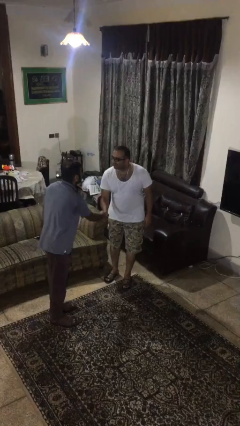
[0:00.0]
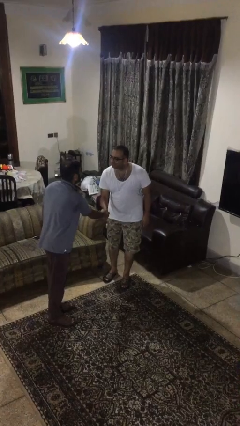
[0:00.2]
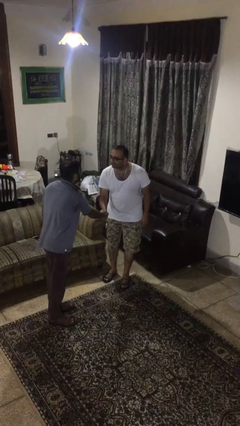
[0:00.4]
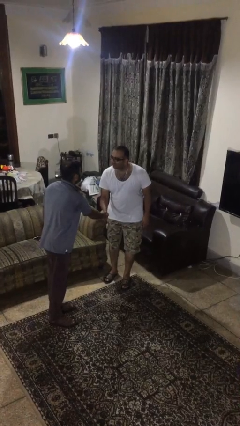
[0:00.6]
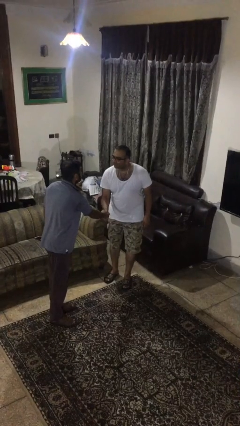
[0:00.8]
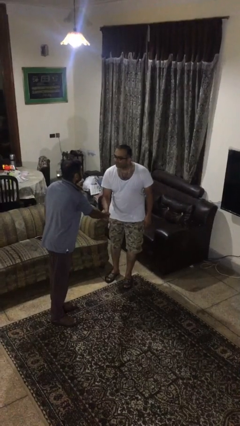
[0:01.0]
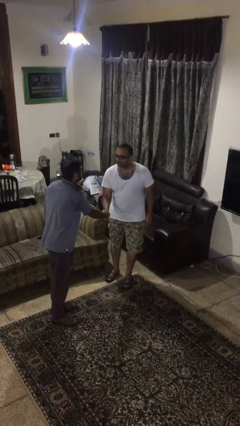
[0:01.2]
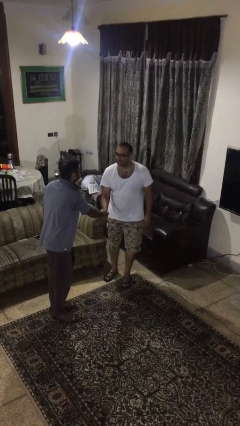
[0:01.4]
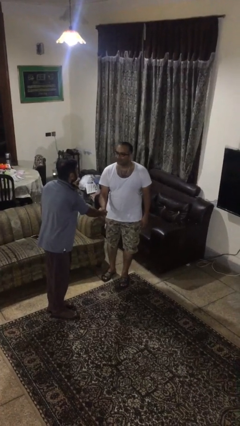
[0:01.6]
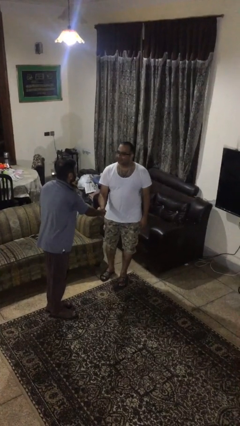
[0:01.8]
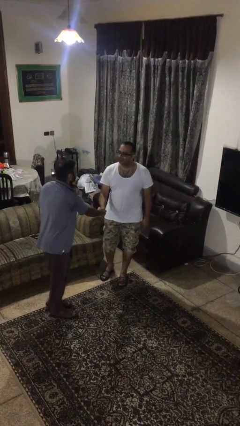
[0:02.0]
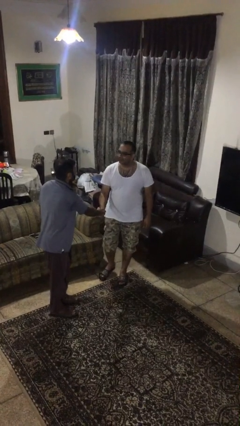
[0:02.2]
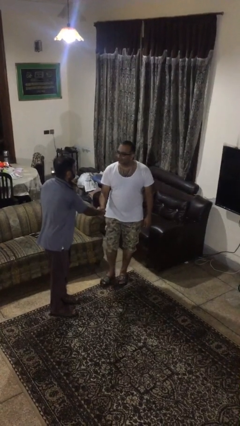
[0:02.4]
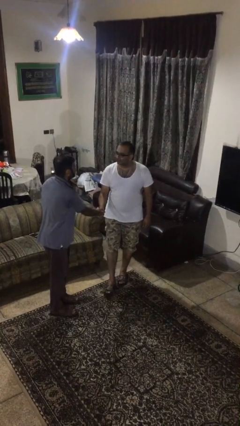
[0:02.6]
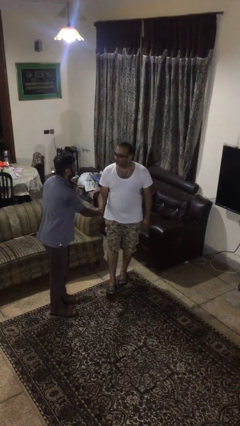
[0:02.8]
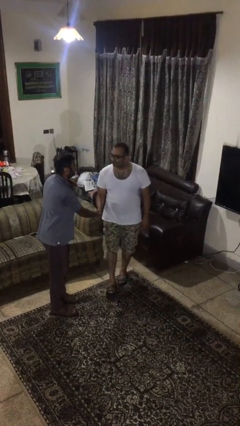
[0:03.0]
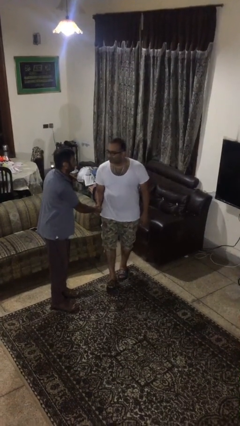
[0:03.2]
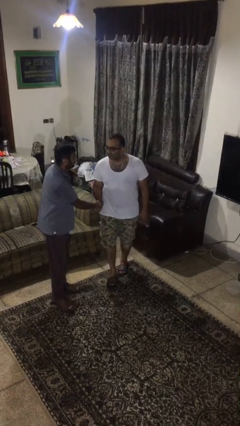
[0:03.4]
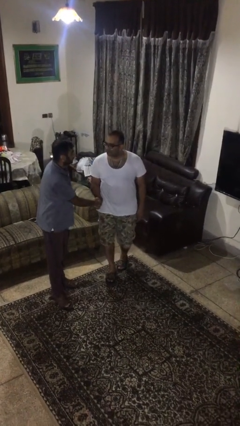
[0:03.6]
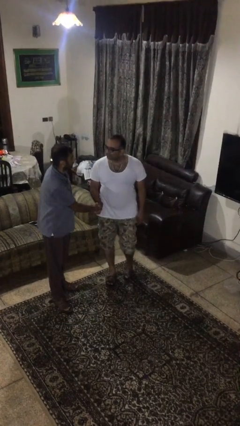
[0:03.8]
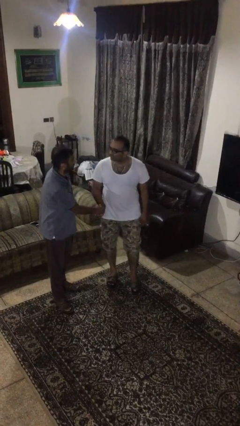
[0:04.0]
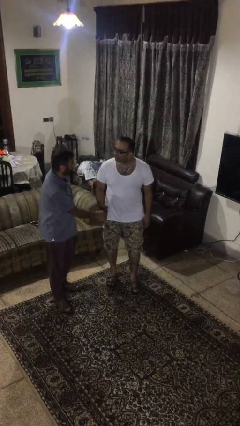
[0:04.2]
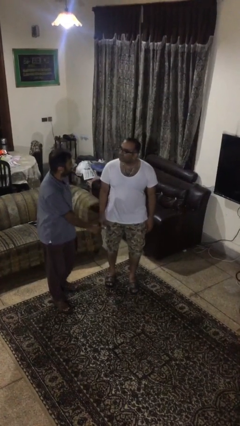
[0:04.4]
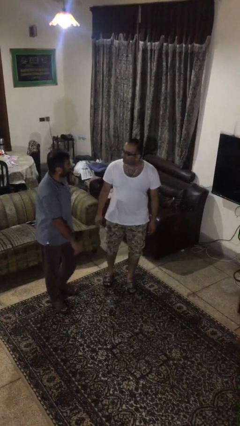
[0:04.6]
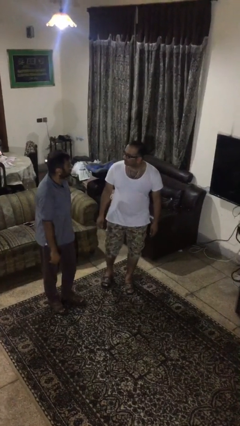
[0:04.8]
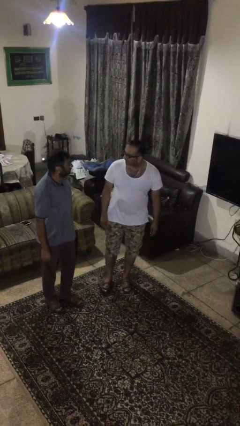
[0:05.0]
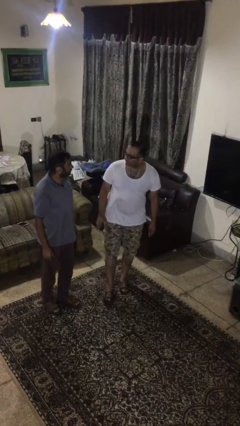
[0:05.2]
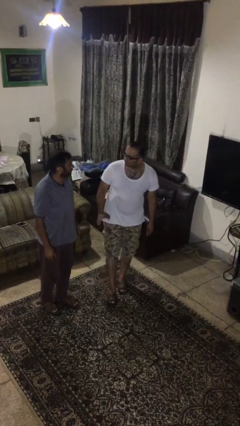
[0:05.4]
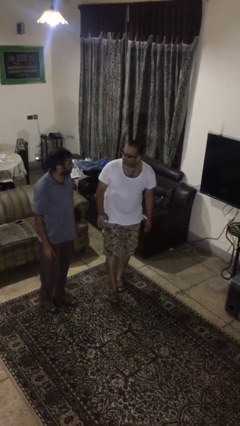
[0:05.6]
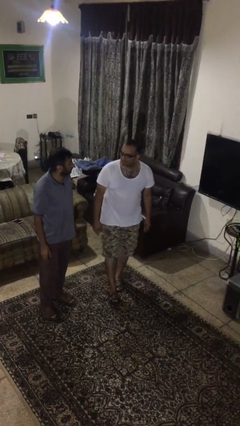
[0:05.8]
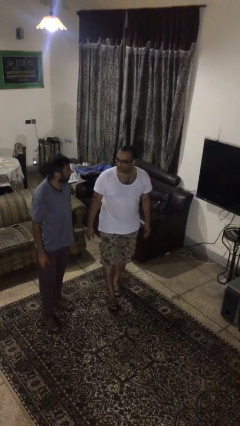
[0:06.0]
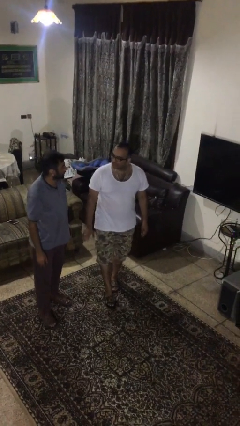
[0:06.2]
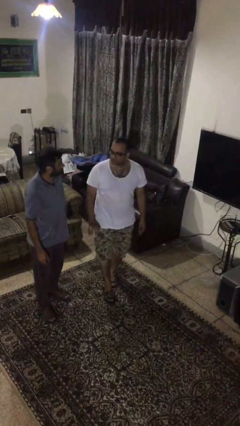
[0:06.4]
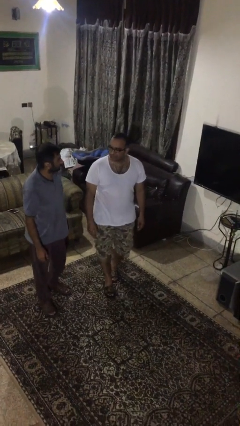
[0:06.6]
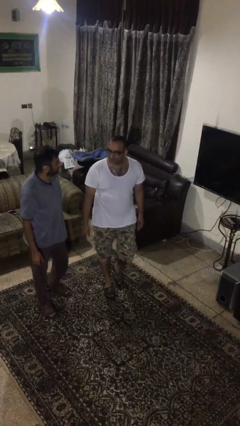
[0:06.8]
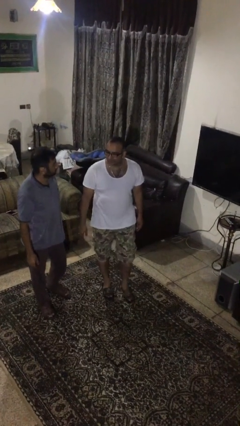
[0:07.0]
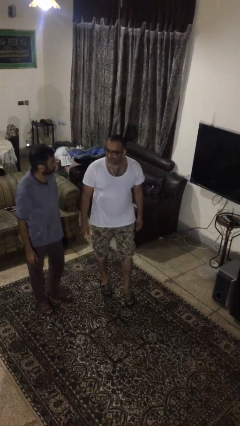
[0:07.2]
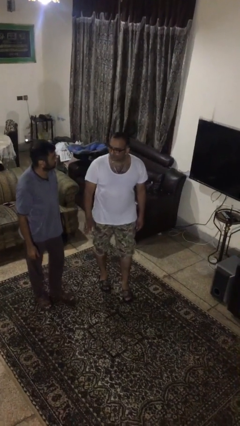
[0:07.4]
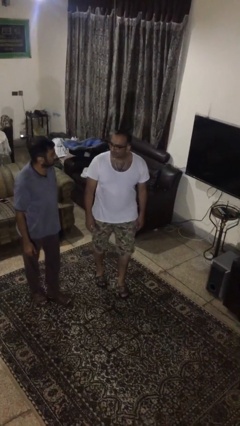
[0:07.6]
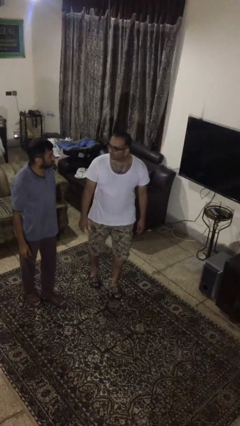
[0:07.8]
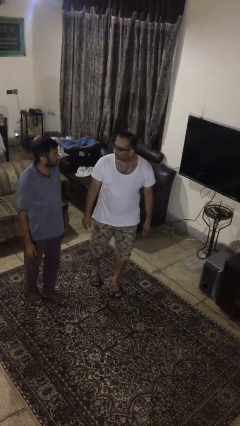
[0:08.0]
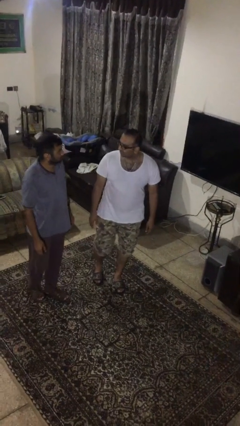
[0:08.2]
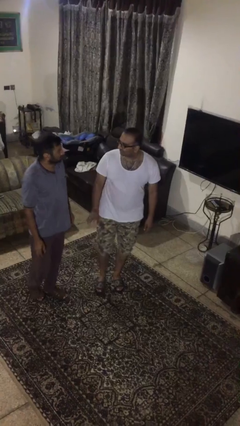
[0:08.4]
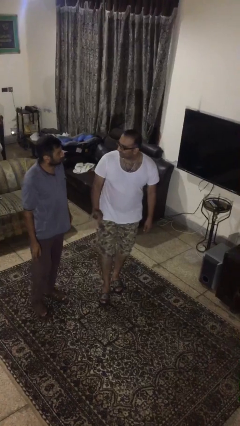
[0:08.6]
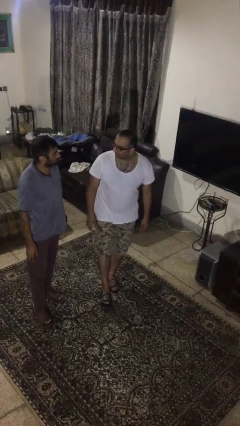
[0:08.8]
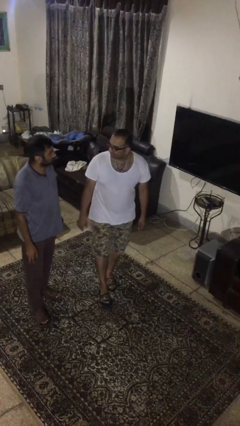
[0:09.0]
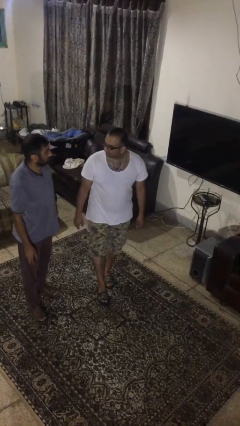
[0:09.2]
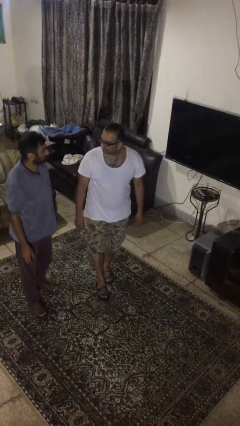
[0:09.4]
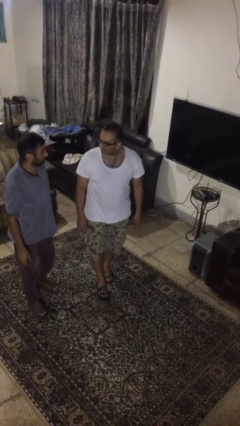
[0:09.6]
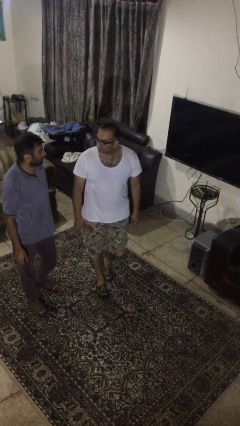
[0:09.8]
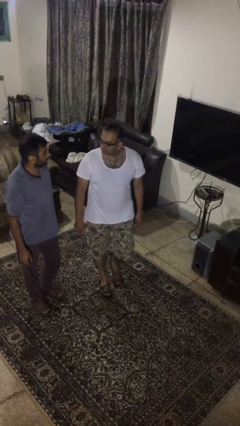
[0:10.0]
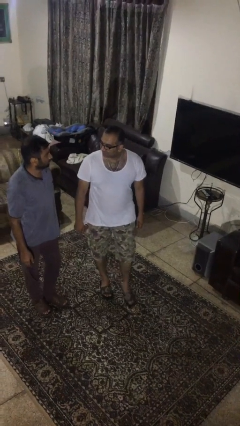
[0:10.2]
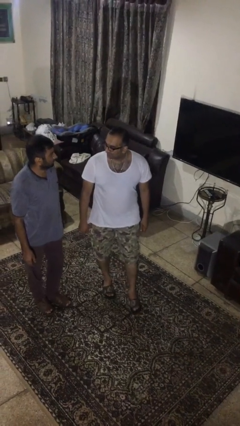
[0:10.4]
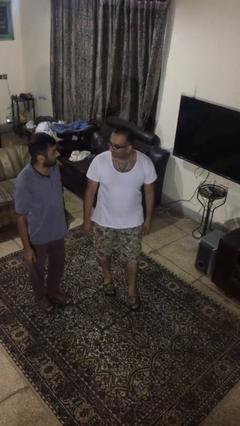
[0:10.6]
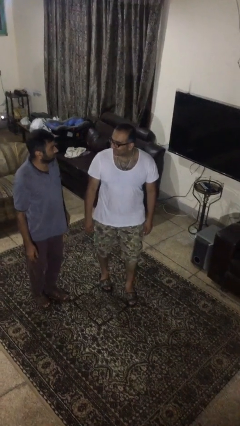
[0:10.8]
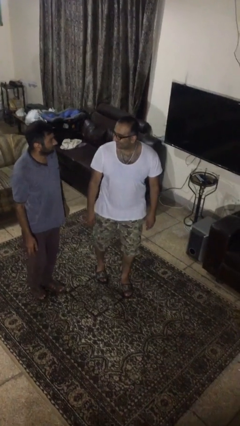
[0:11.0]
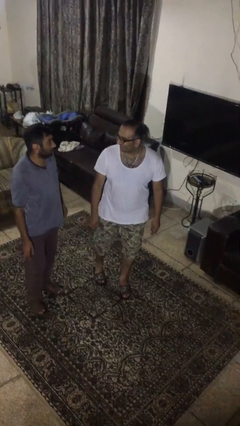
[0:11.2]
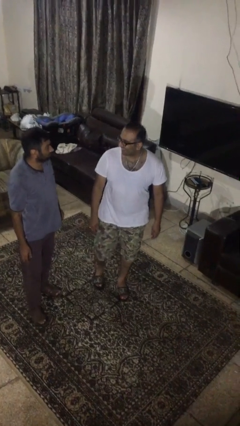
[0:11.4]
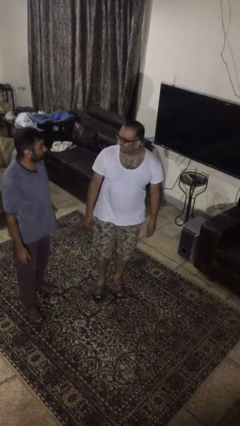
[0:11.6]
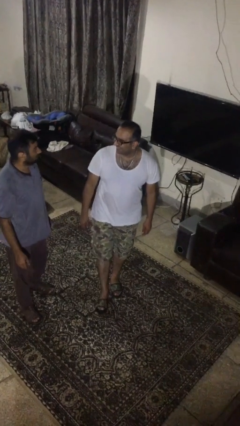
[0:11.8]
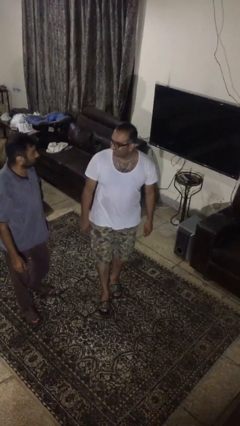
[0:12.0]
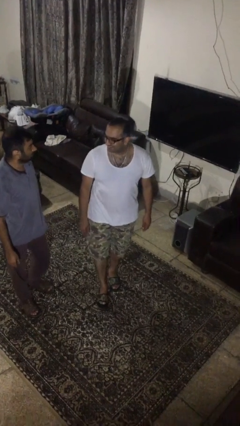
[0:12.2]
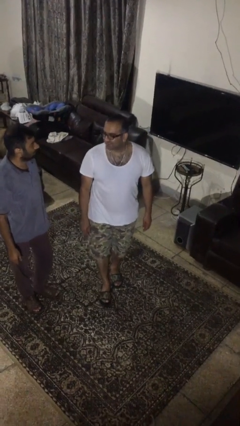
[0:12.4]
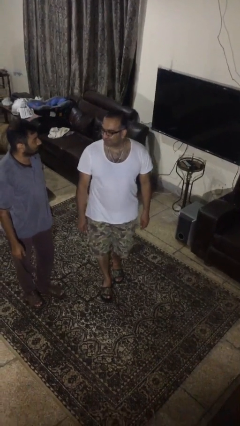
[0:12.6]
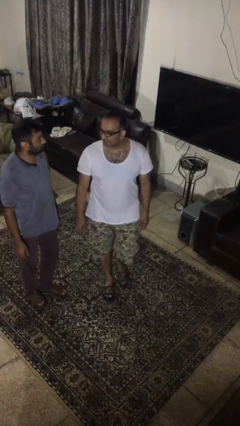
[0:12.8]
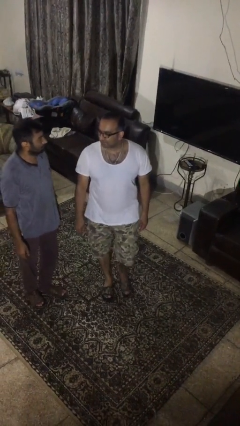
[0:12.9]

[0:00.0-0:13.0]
person talks to person

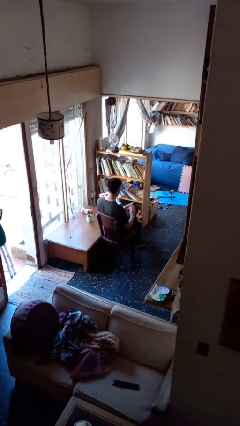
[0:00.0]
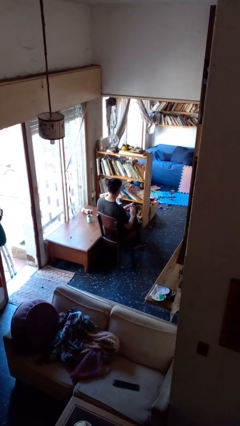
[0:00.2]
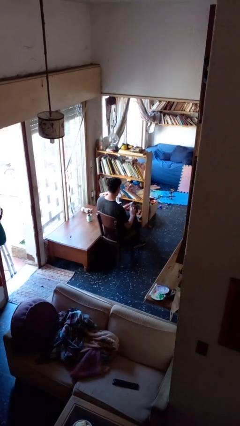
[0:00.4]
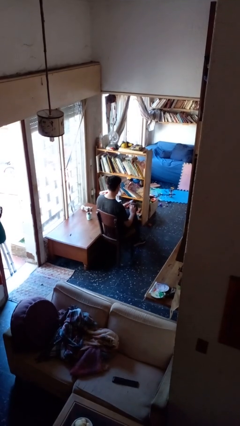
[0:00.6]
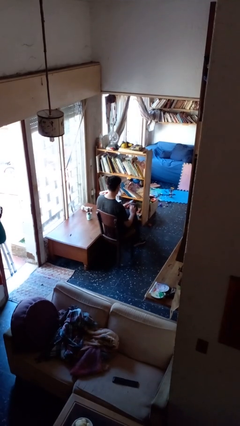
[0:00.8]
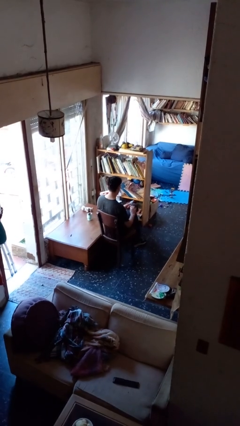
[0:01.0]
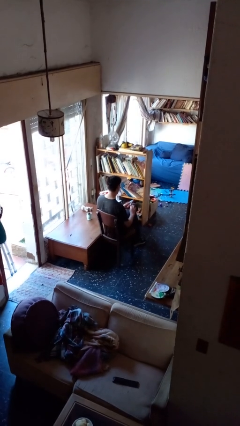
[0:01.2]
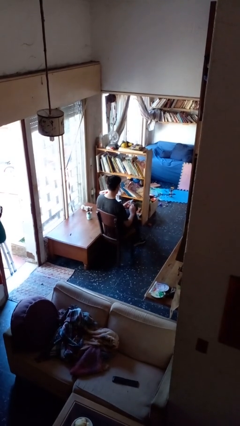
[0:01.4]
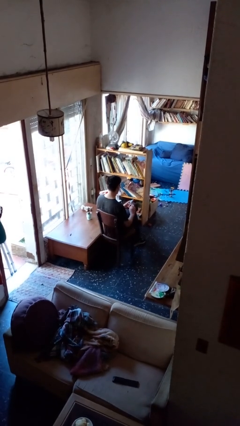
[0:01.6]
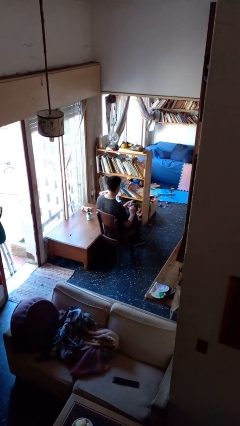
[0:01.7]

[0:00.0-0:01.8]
person clips fingernails

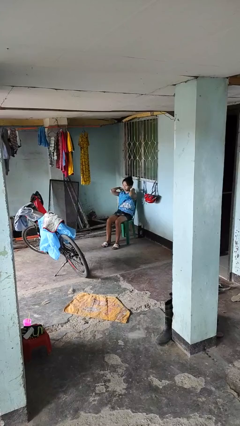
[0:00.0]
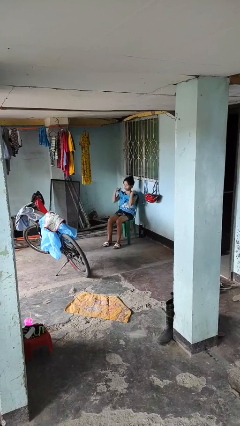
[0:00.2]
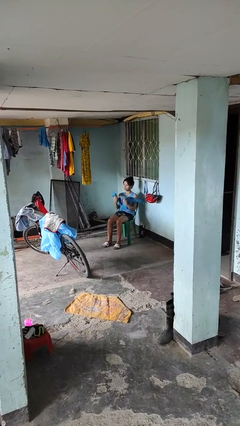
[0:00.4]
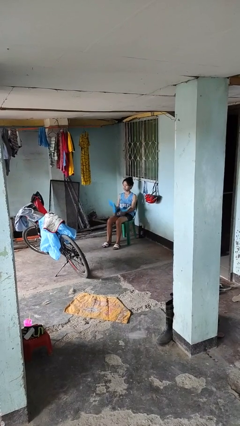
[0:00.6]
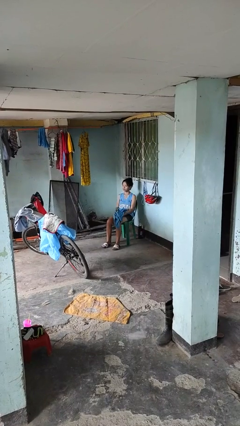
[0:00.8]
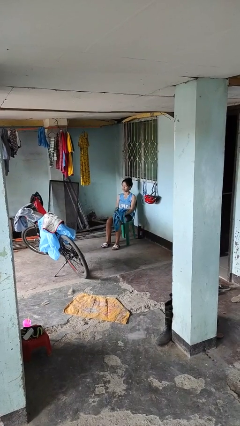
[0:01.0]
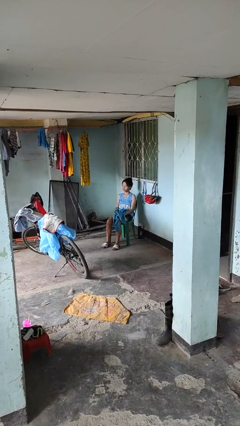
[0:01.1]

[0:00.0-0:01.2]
person takes off scarf

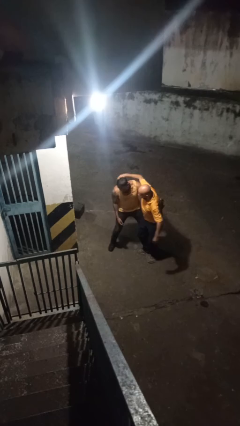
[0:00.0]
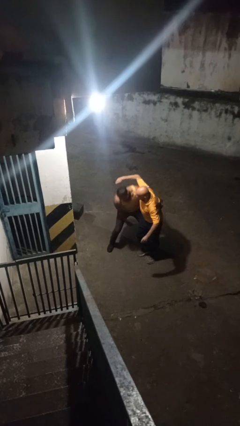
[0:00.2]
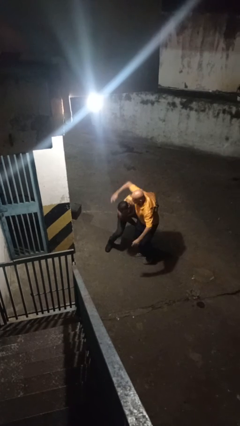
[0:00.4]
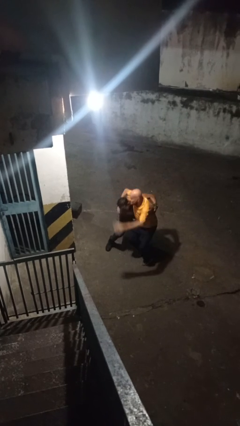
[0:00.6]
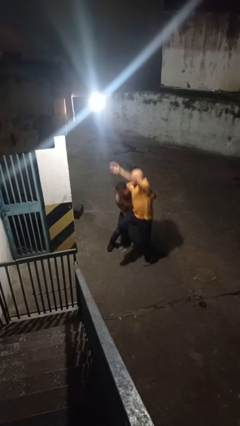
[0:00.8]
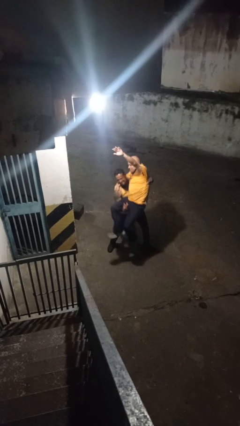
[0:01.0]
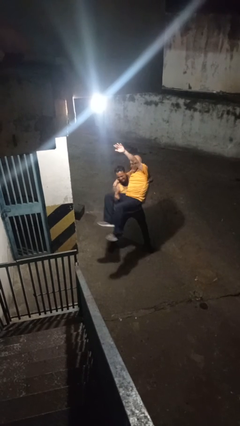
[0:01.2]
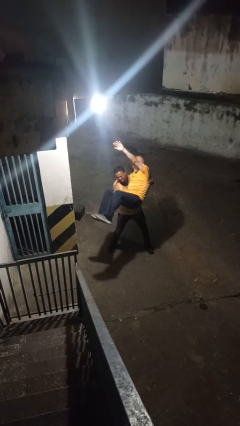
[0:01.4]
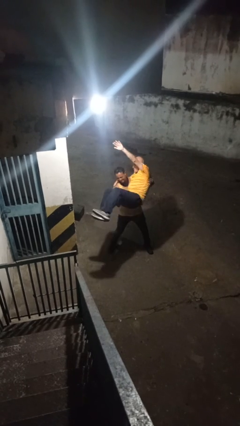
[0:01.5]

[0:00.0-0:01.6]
person picks up person

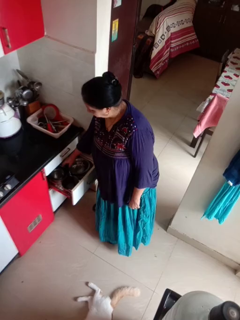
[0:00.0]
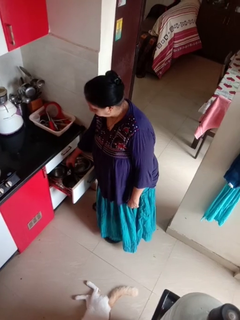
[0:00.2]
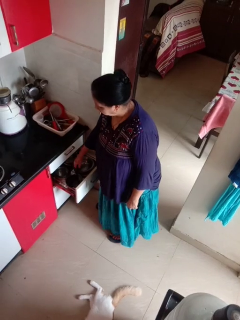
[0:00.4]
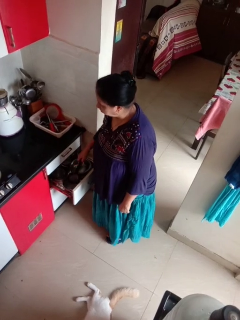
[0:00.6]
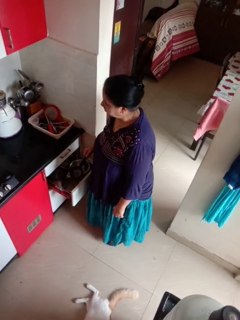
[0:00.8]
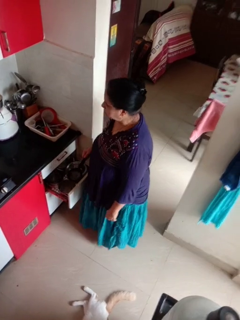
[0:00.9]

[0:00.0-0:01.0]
person takes object from kitchen drawer
